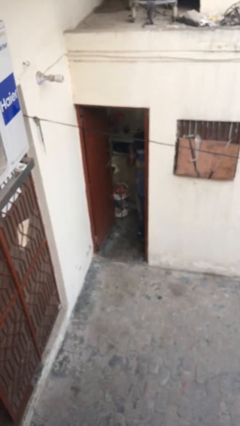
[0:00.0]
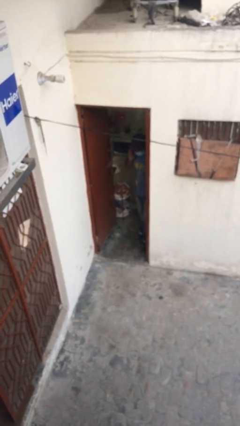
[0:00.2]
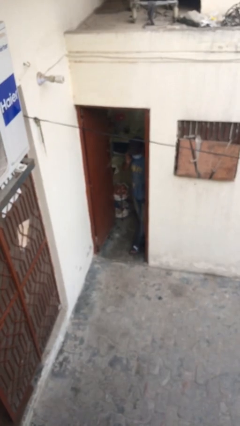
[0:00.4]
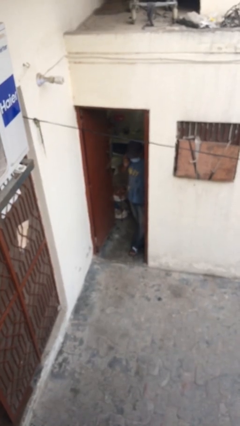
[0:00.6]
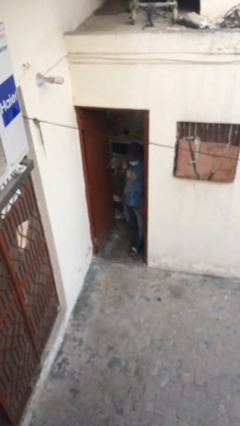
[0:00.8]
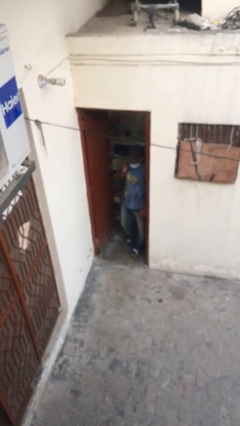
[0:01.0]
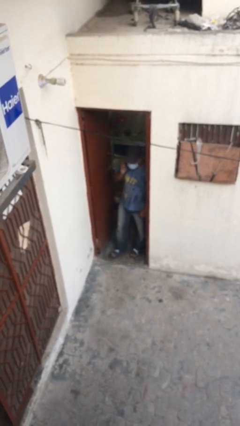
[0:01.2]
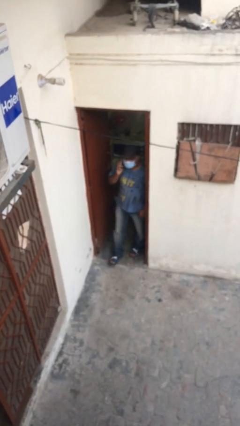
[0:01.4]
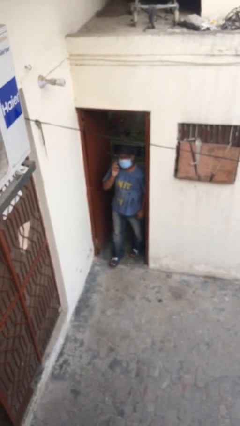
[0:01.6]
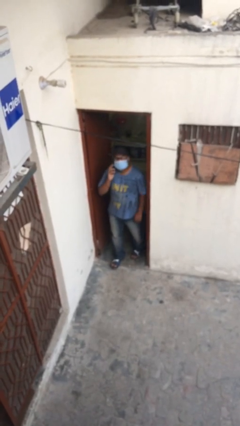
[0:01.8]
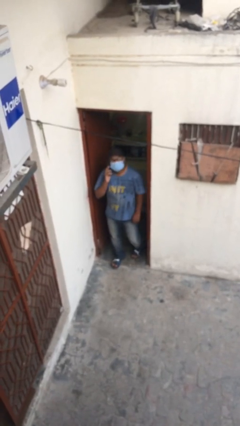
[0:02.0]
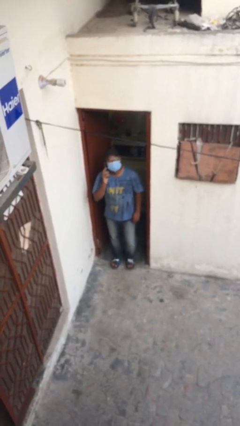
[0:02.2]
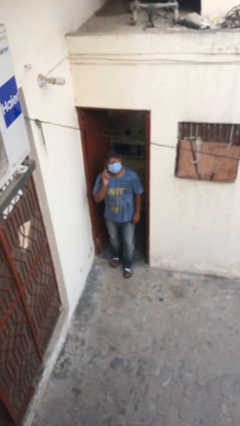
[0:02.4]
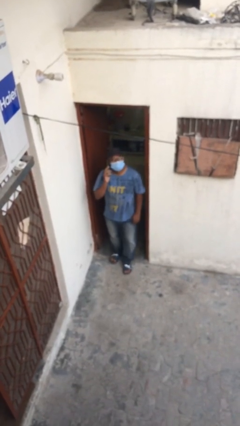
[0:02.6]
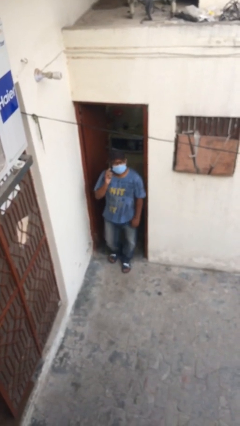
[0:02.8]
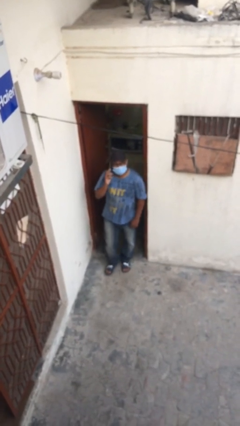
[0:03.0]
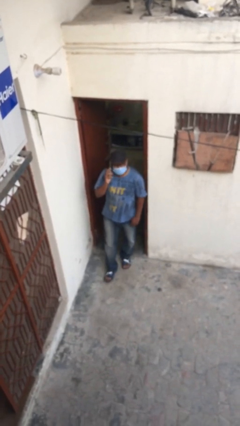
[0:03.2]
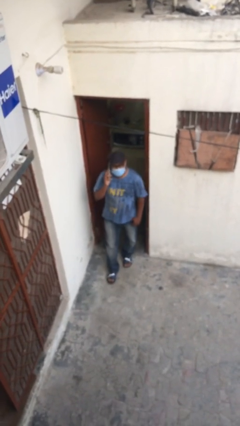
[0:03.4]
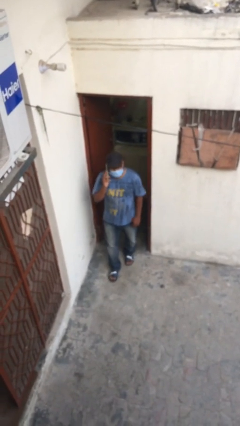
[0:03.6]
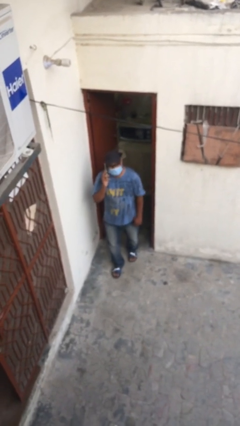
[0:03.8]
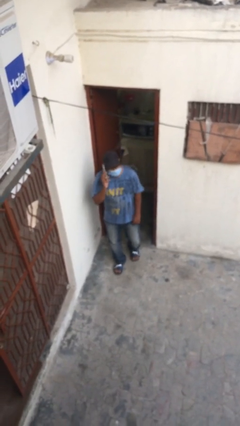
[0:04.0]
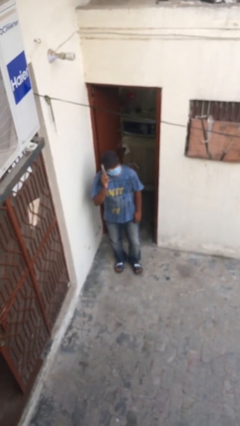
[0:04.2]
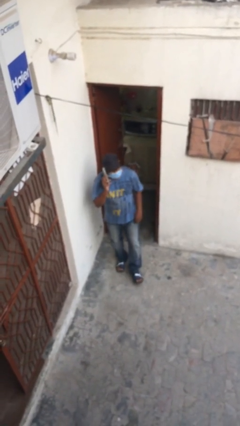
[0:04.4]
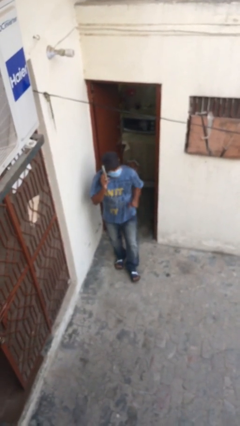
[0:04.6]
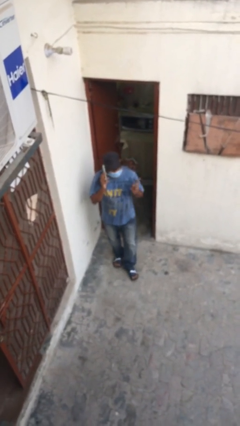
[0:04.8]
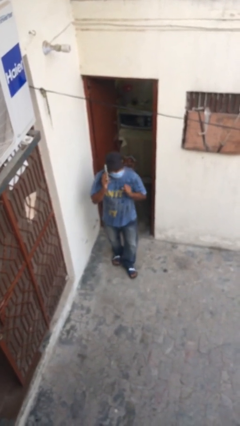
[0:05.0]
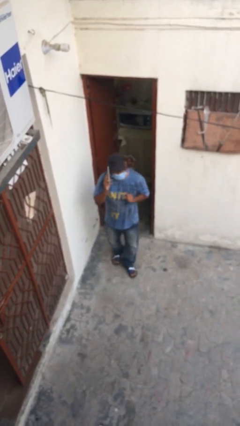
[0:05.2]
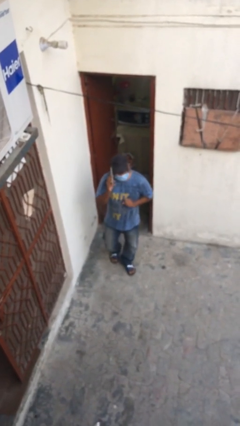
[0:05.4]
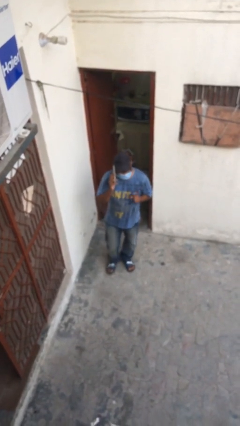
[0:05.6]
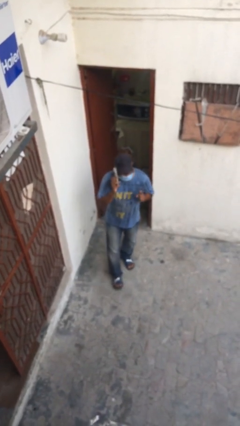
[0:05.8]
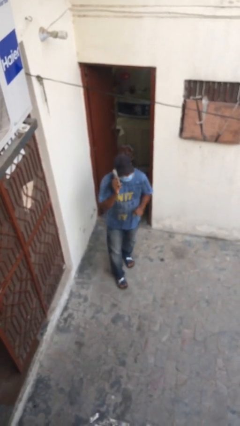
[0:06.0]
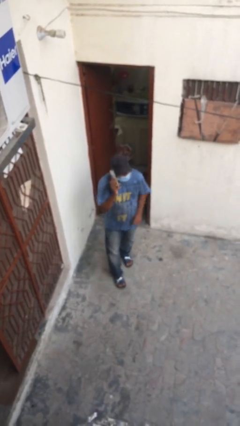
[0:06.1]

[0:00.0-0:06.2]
person enters scene through structure

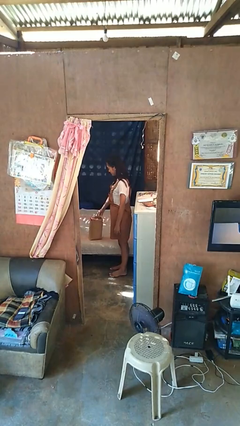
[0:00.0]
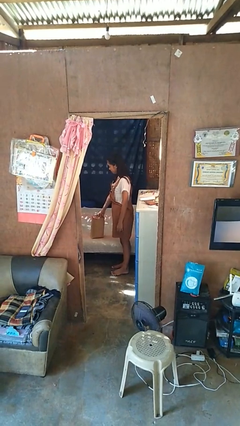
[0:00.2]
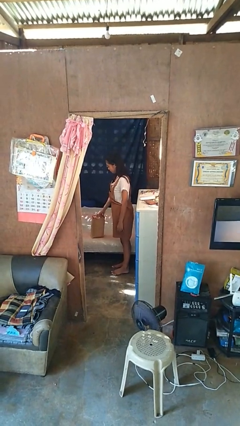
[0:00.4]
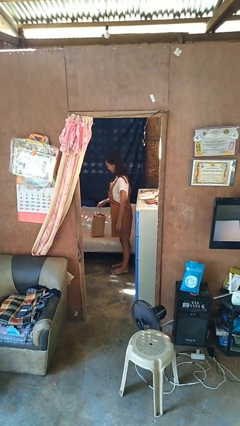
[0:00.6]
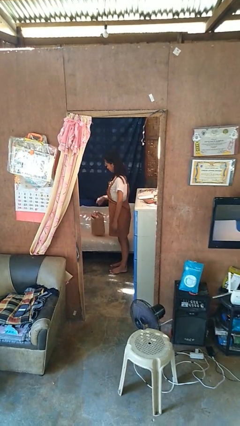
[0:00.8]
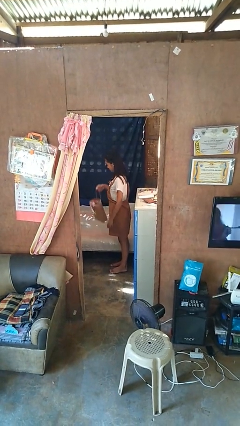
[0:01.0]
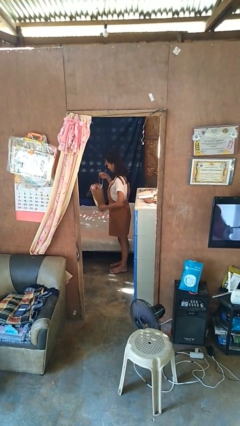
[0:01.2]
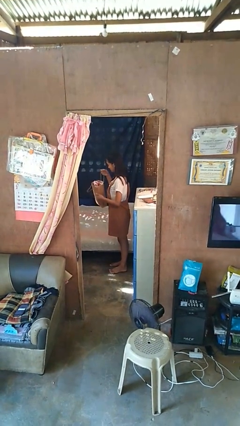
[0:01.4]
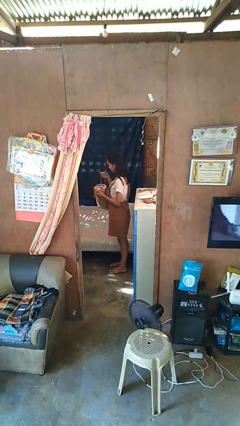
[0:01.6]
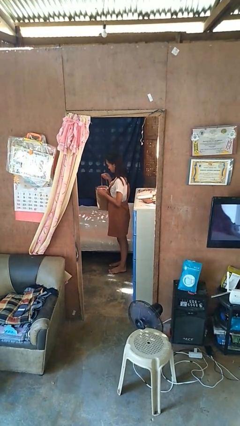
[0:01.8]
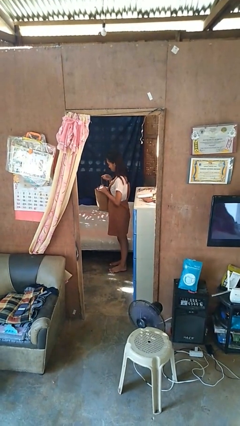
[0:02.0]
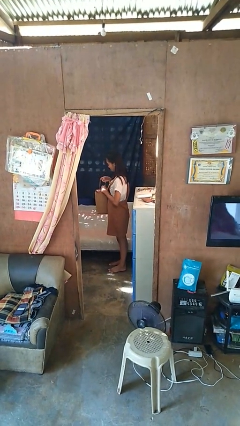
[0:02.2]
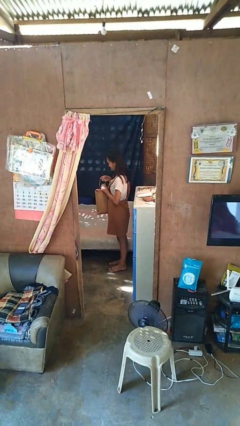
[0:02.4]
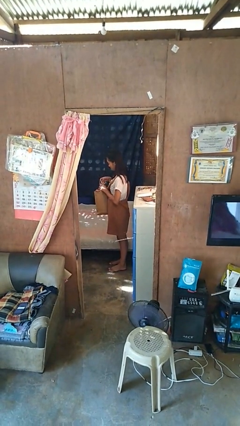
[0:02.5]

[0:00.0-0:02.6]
person picks up object from couch

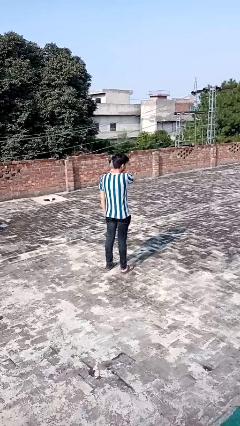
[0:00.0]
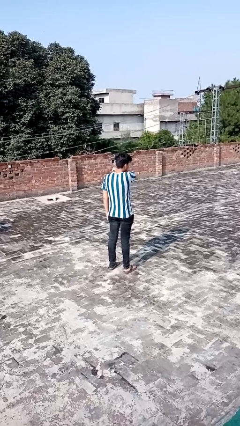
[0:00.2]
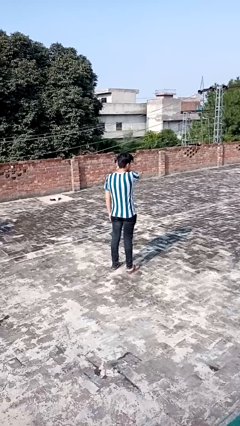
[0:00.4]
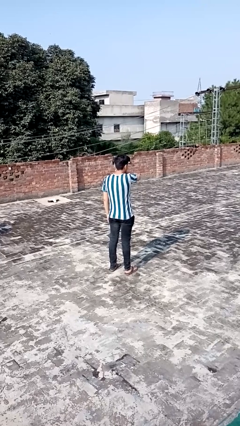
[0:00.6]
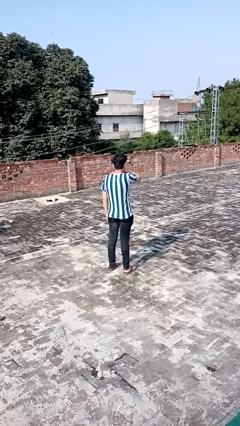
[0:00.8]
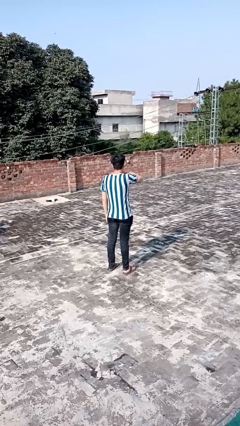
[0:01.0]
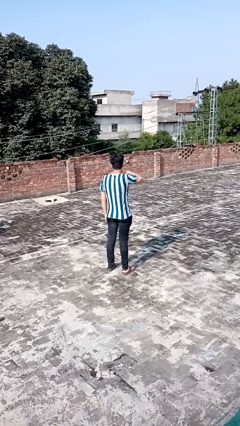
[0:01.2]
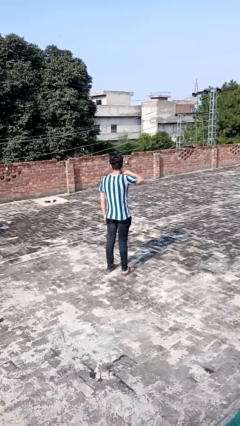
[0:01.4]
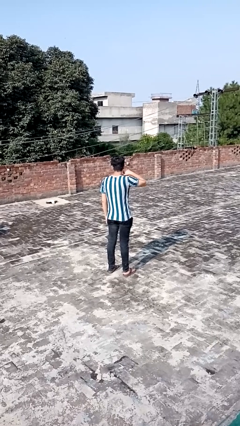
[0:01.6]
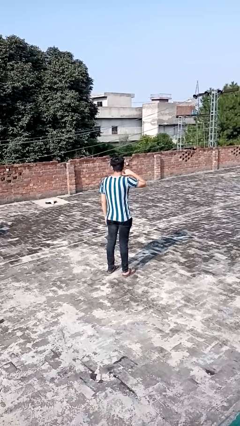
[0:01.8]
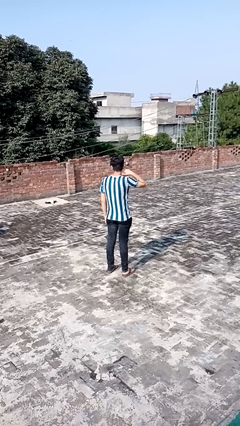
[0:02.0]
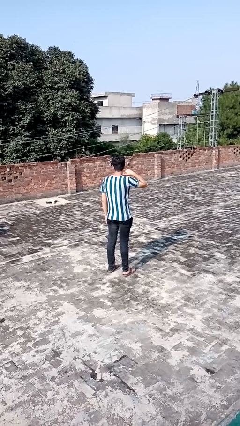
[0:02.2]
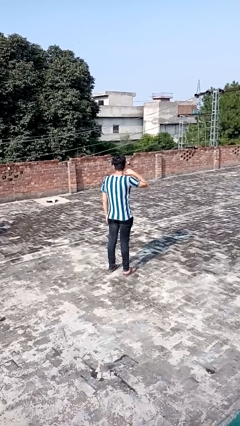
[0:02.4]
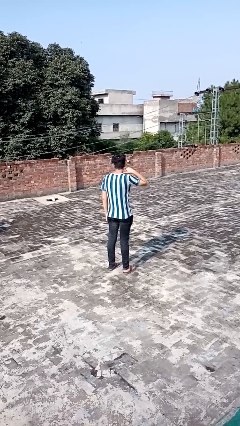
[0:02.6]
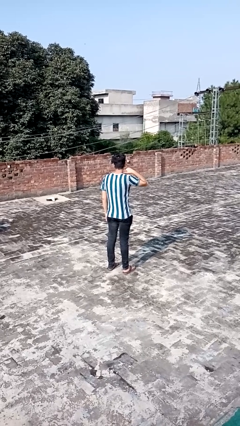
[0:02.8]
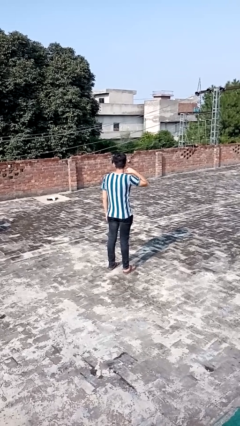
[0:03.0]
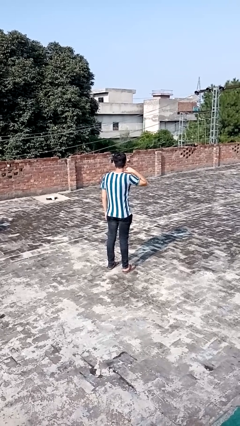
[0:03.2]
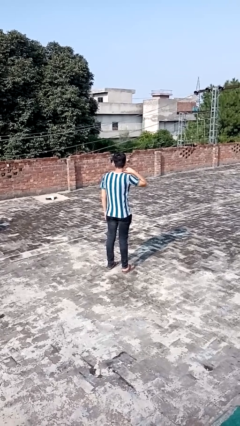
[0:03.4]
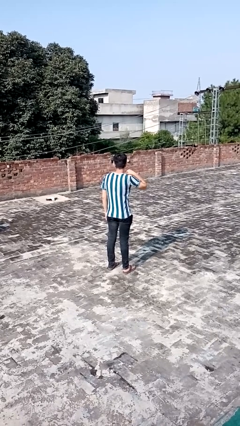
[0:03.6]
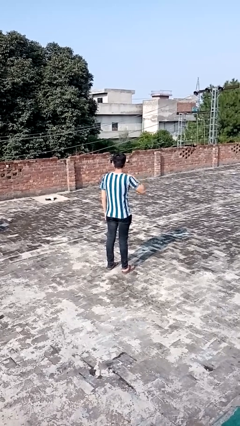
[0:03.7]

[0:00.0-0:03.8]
person gestures cut

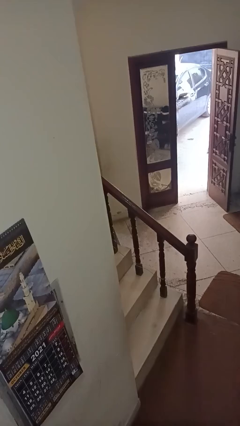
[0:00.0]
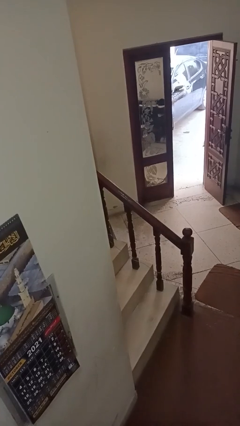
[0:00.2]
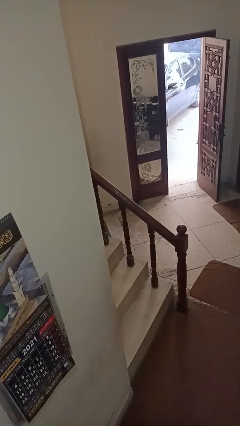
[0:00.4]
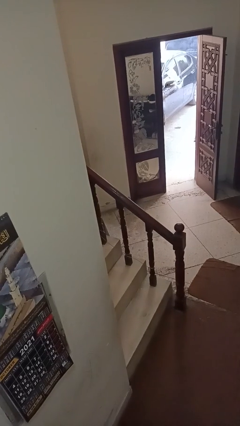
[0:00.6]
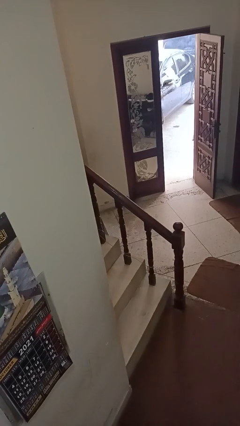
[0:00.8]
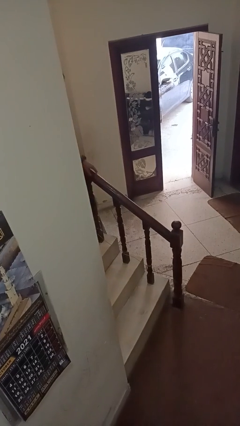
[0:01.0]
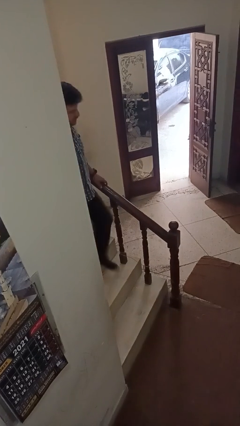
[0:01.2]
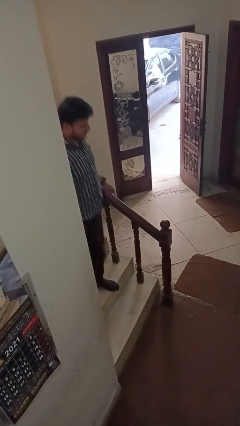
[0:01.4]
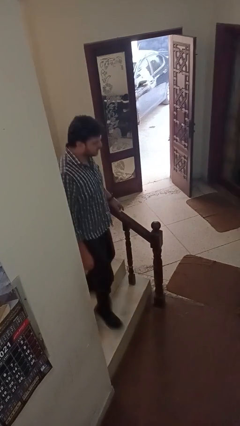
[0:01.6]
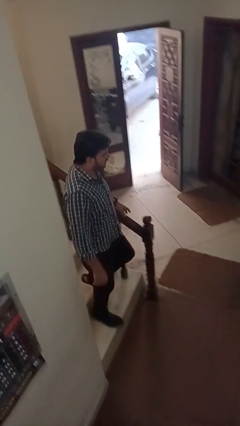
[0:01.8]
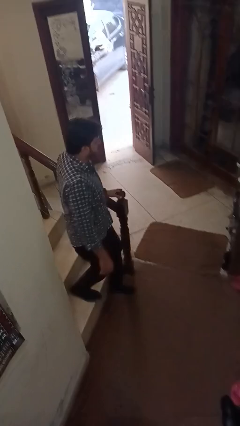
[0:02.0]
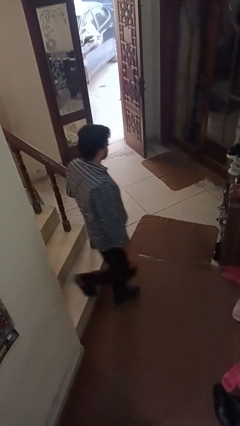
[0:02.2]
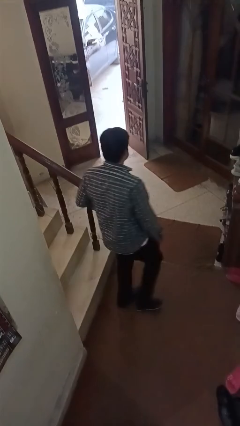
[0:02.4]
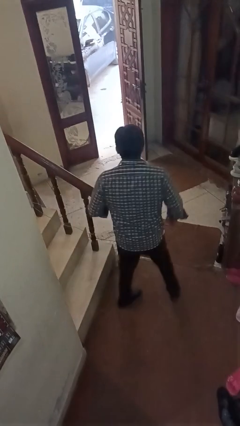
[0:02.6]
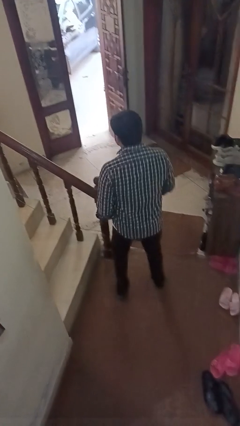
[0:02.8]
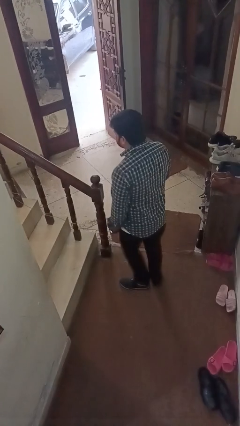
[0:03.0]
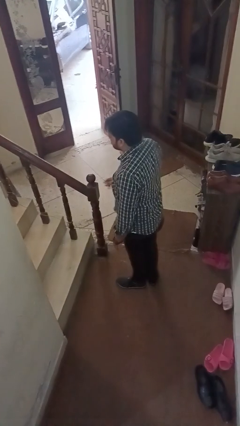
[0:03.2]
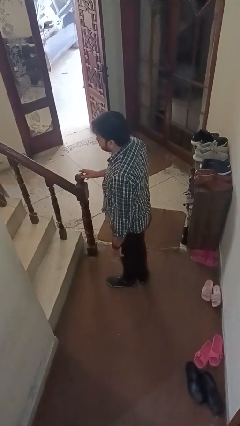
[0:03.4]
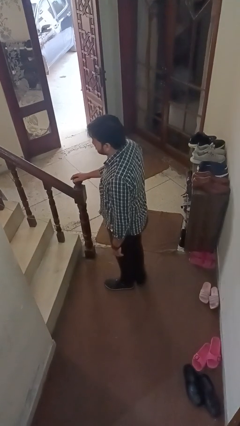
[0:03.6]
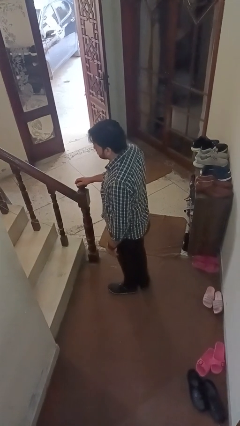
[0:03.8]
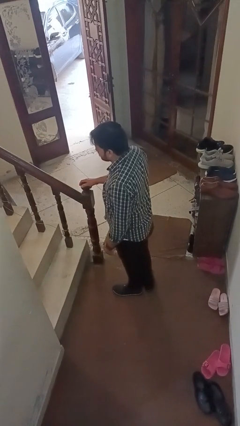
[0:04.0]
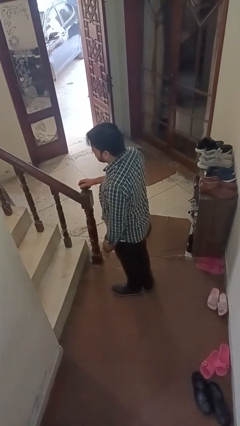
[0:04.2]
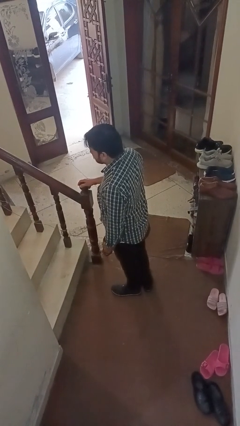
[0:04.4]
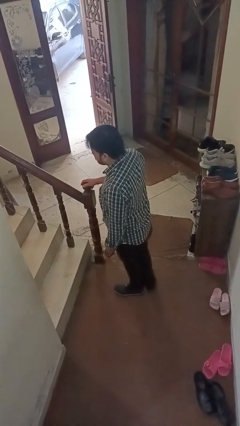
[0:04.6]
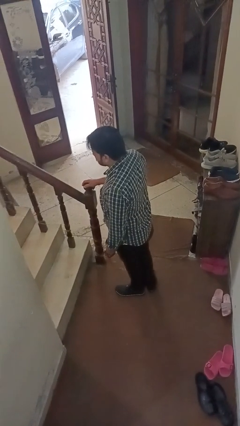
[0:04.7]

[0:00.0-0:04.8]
person climbs down stairs
